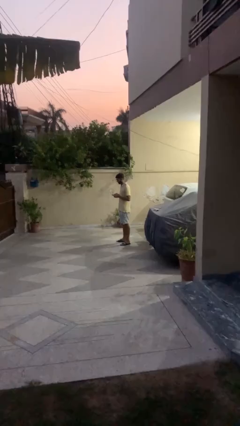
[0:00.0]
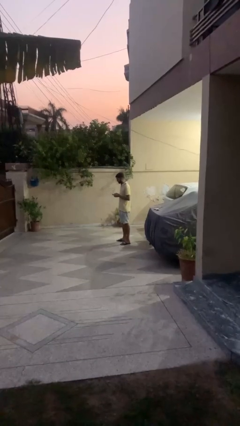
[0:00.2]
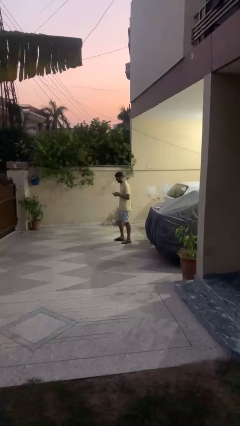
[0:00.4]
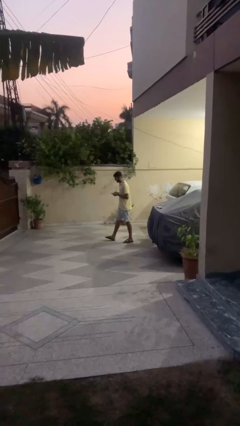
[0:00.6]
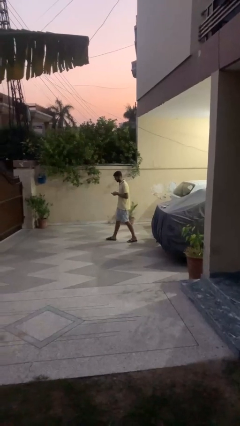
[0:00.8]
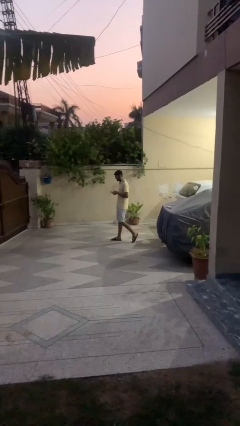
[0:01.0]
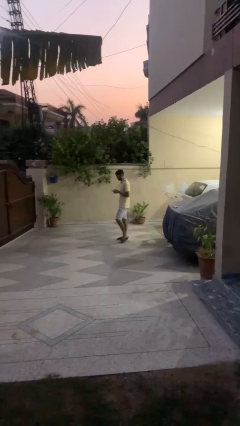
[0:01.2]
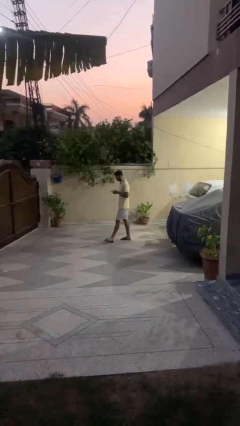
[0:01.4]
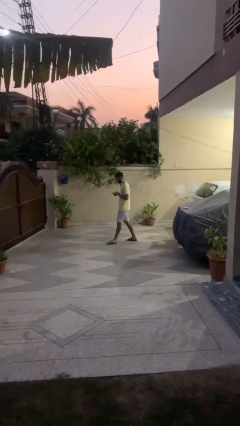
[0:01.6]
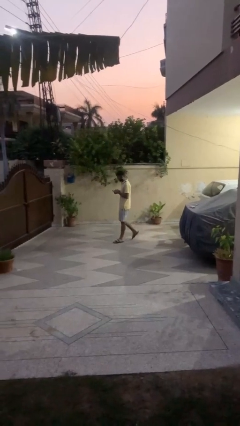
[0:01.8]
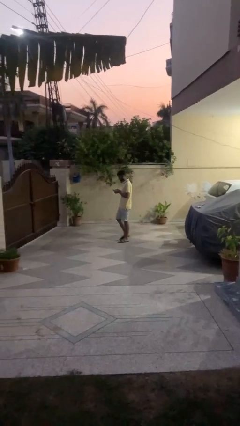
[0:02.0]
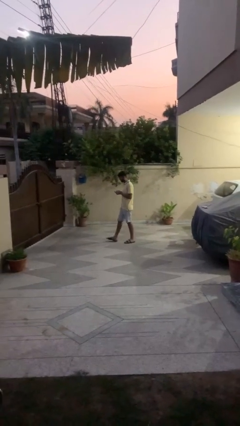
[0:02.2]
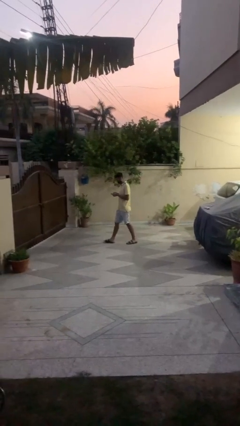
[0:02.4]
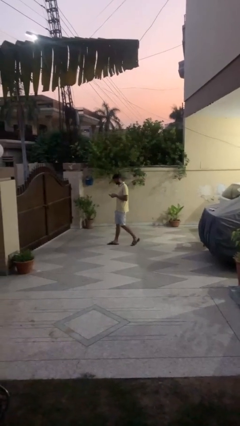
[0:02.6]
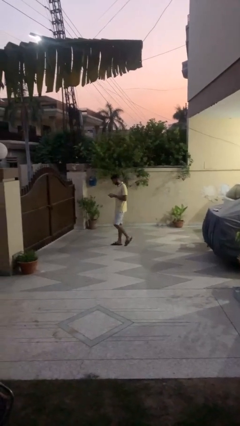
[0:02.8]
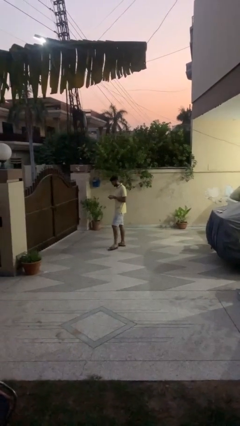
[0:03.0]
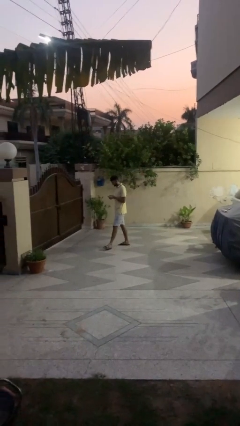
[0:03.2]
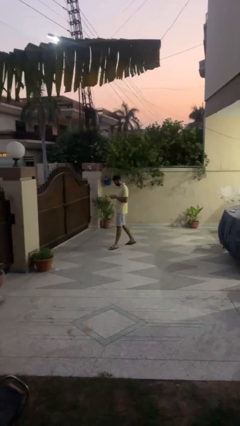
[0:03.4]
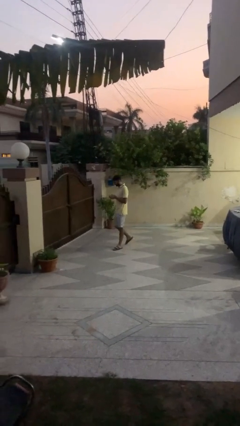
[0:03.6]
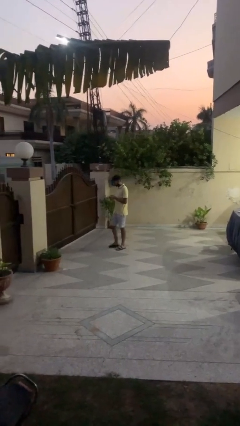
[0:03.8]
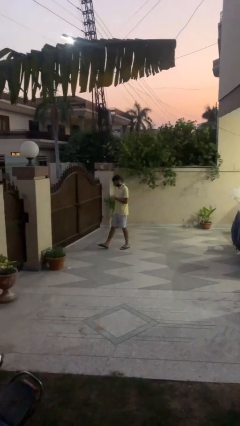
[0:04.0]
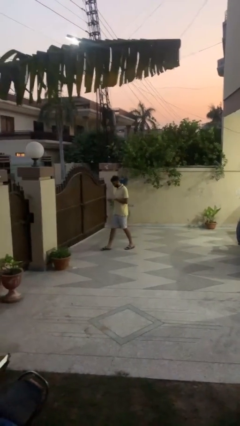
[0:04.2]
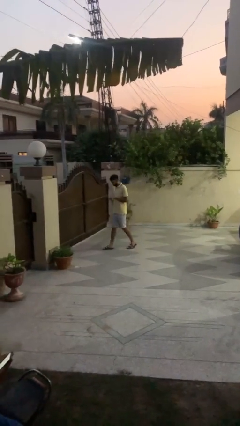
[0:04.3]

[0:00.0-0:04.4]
person texts on phone

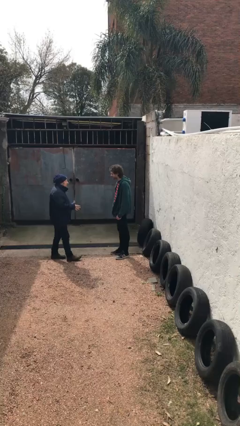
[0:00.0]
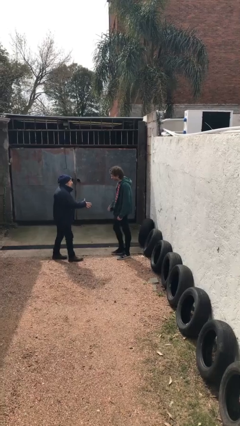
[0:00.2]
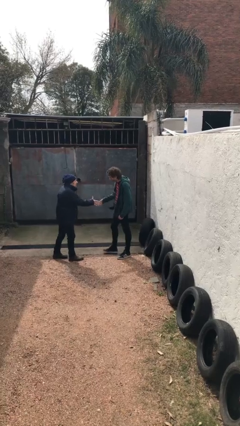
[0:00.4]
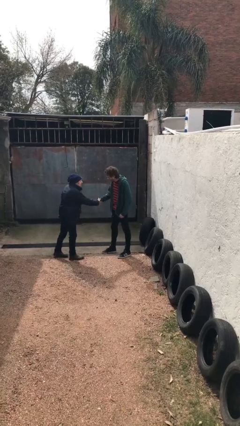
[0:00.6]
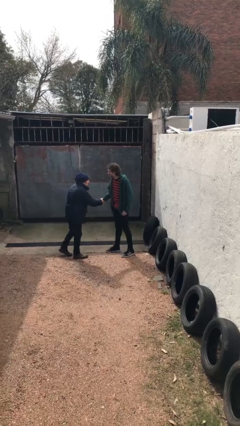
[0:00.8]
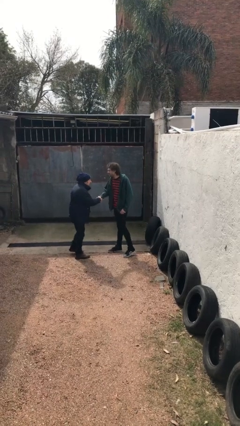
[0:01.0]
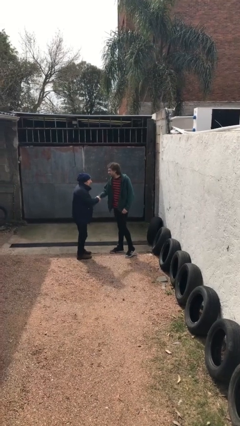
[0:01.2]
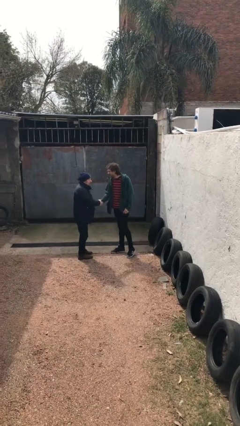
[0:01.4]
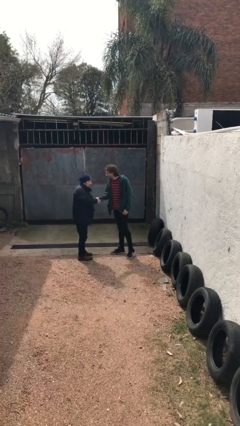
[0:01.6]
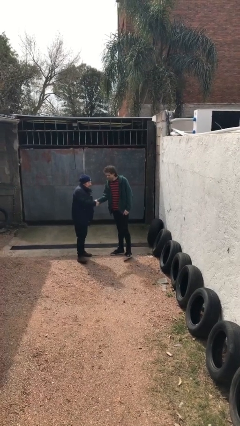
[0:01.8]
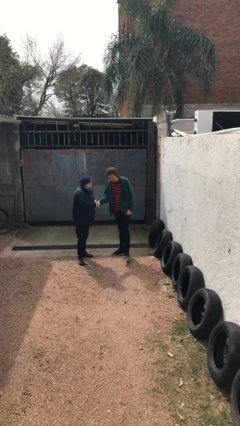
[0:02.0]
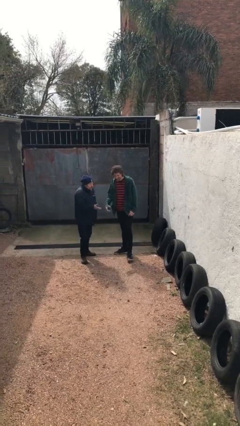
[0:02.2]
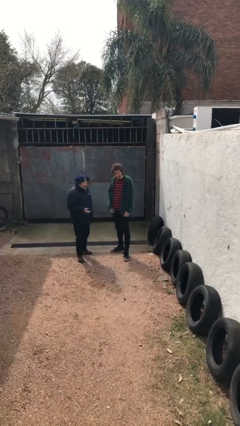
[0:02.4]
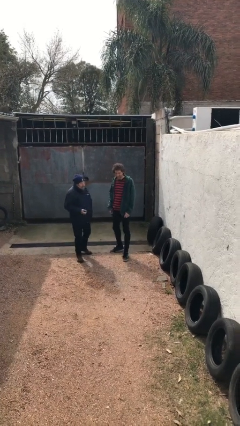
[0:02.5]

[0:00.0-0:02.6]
person shakes hand

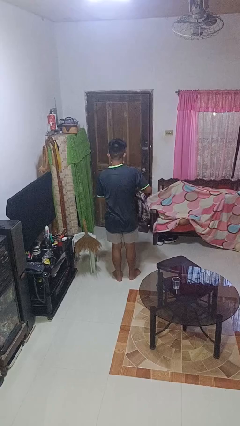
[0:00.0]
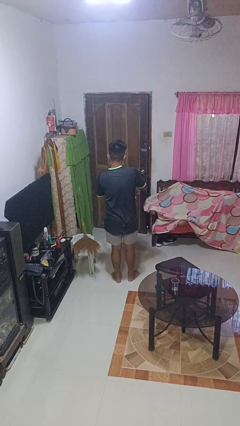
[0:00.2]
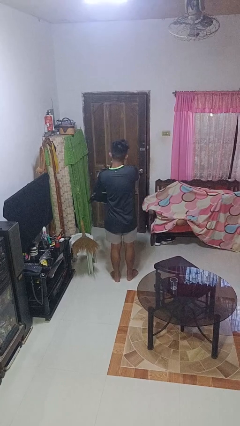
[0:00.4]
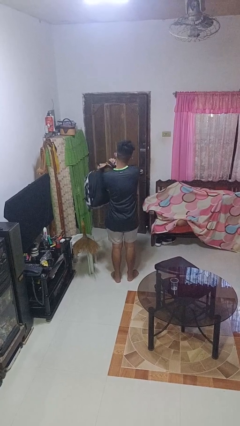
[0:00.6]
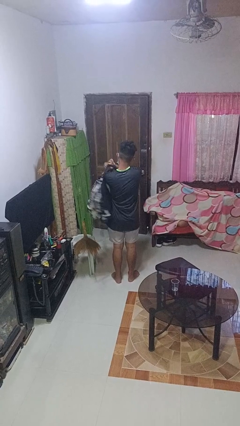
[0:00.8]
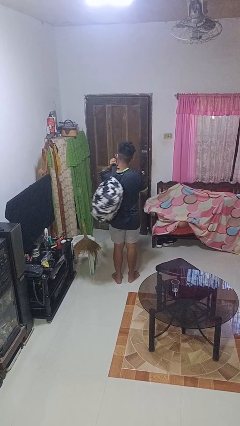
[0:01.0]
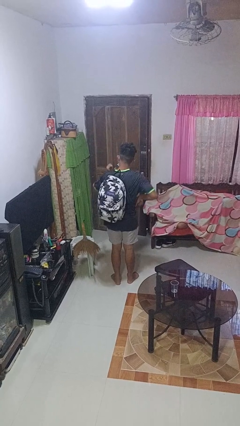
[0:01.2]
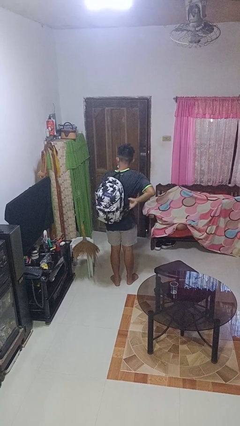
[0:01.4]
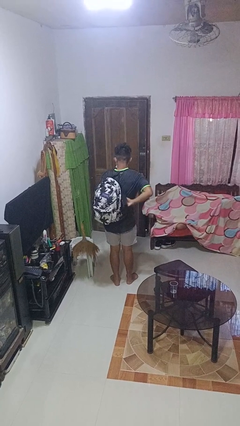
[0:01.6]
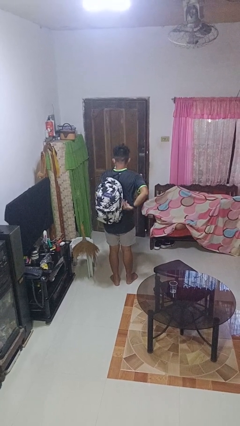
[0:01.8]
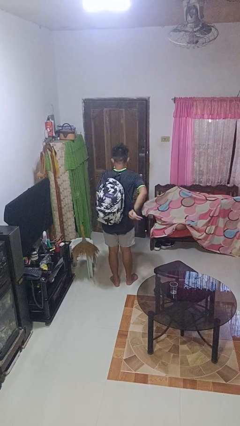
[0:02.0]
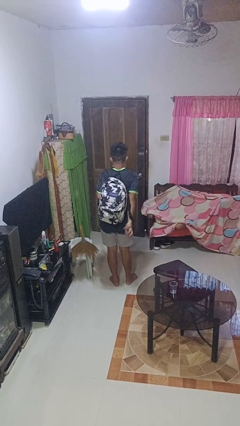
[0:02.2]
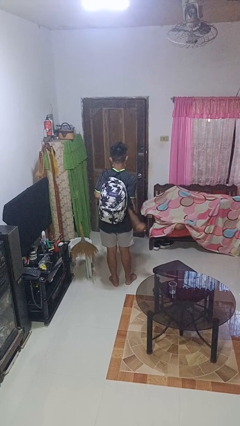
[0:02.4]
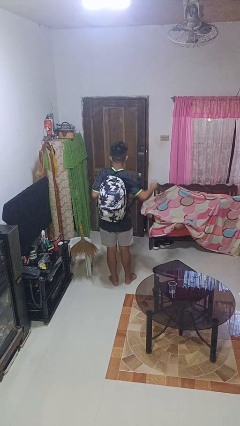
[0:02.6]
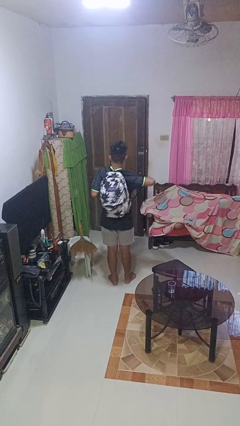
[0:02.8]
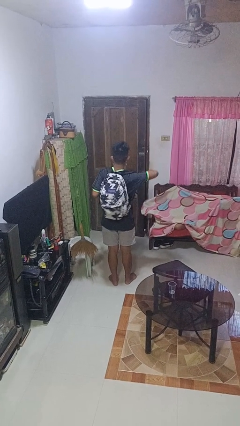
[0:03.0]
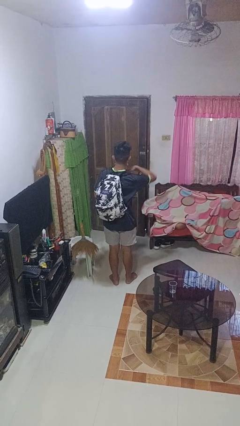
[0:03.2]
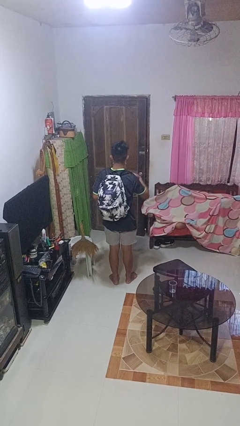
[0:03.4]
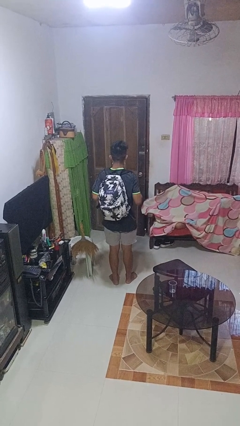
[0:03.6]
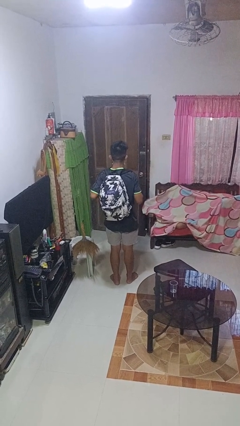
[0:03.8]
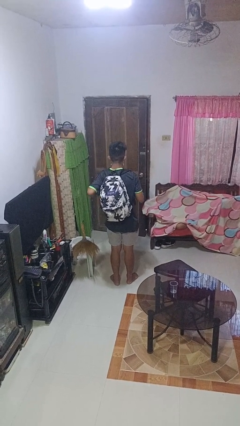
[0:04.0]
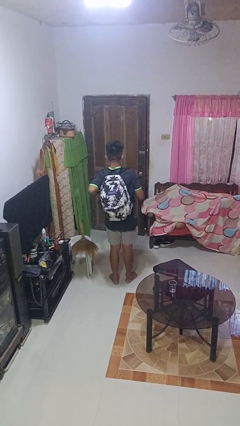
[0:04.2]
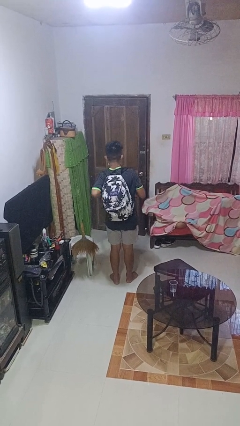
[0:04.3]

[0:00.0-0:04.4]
person puts on backpack

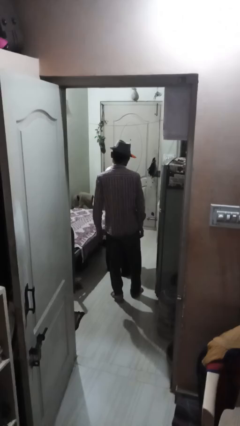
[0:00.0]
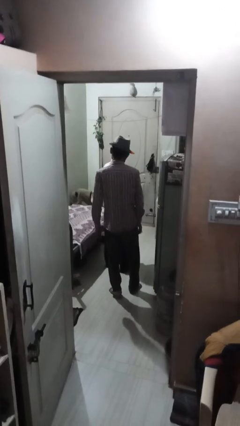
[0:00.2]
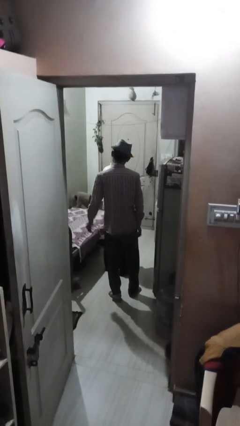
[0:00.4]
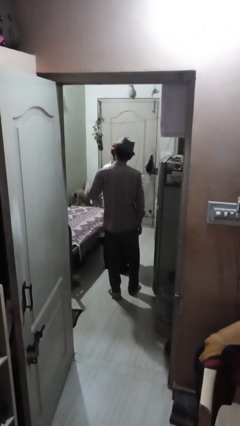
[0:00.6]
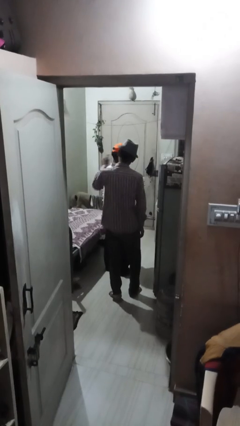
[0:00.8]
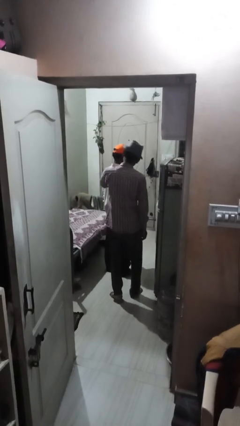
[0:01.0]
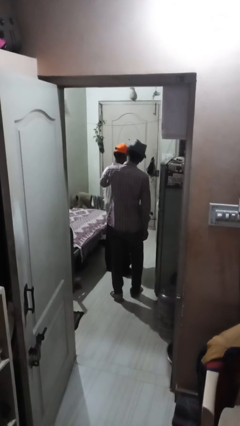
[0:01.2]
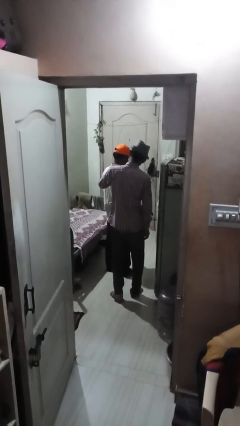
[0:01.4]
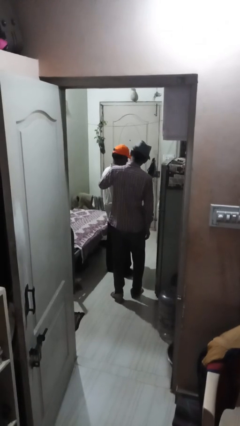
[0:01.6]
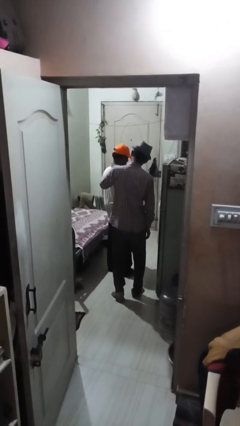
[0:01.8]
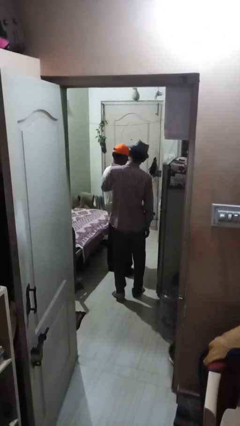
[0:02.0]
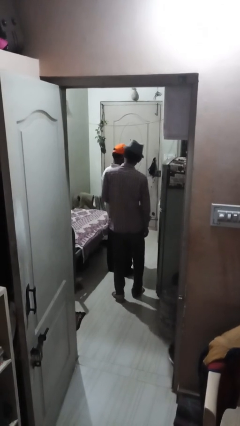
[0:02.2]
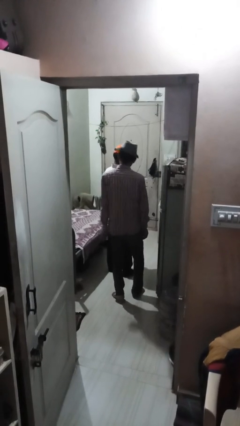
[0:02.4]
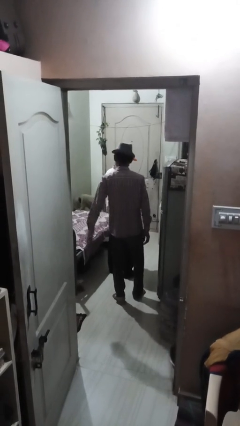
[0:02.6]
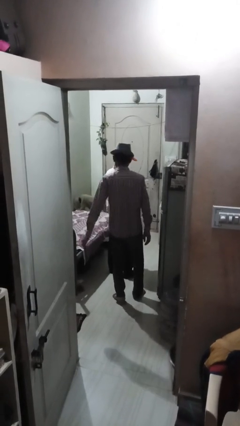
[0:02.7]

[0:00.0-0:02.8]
person touches back of person

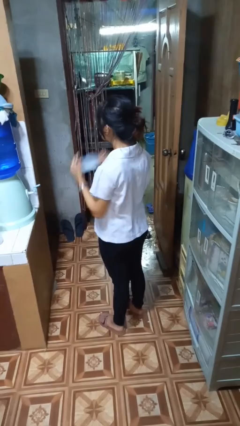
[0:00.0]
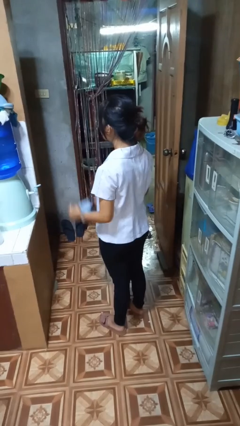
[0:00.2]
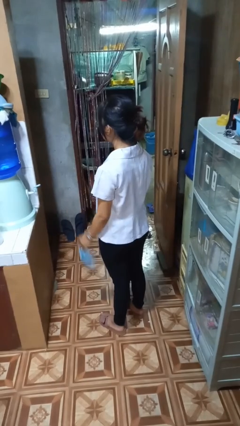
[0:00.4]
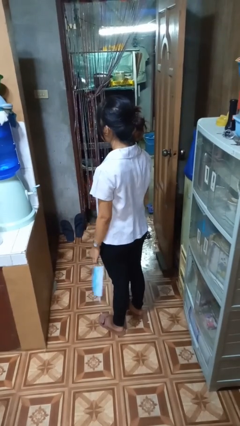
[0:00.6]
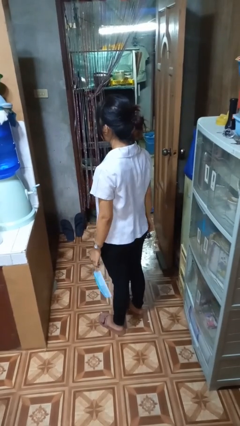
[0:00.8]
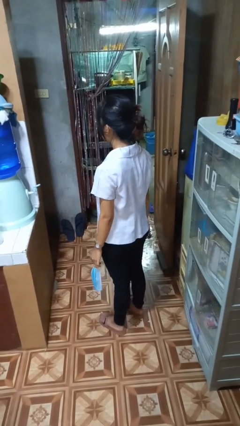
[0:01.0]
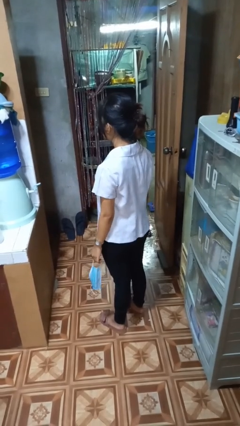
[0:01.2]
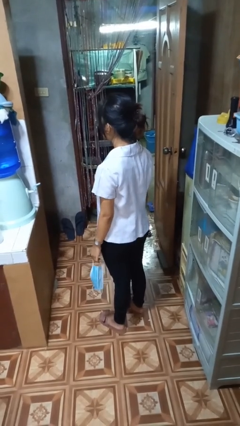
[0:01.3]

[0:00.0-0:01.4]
person takes off facemask

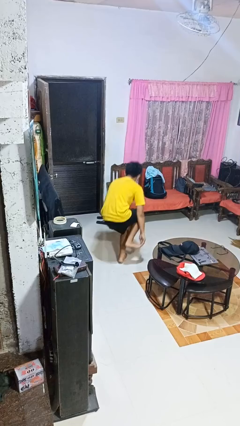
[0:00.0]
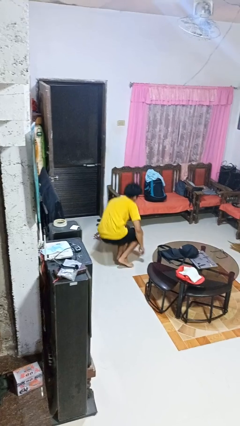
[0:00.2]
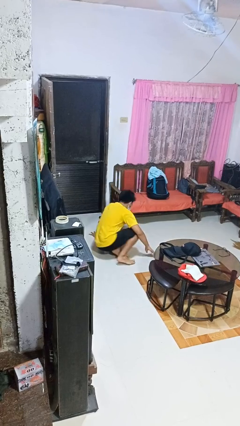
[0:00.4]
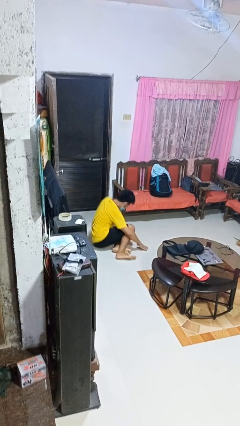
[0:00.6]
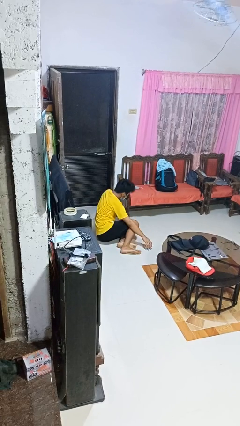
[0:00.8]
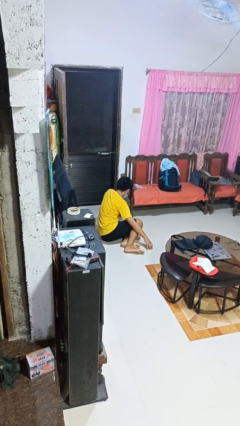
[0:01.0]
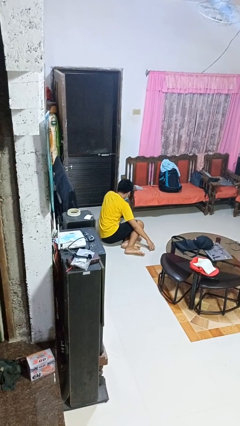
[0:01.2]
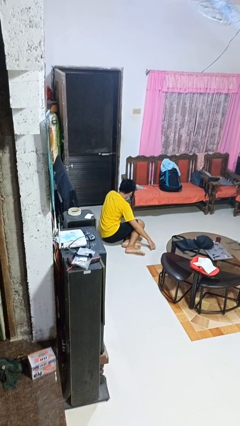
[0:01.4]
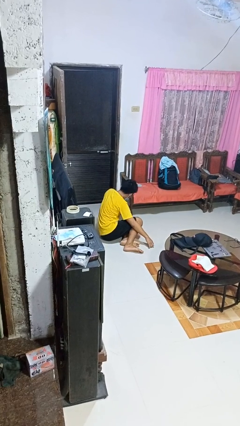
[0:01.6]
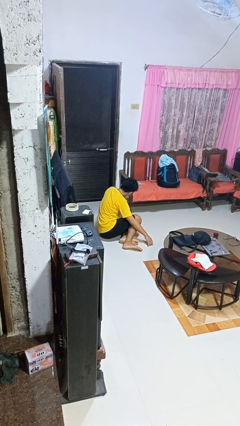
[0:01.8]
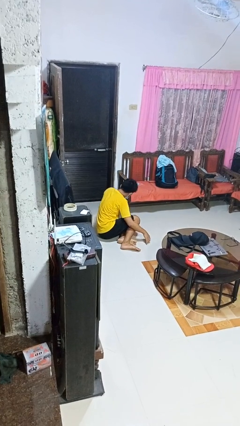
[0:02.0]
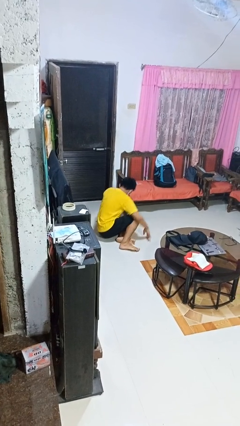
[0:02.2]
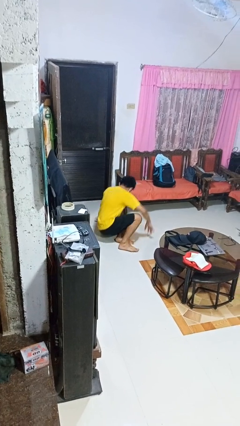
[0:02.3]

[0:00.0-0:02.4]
person lies down on floor
